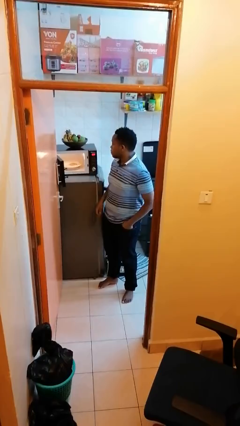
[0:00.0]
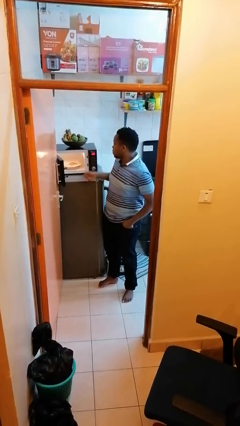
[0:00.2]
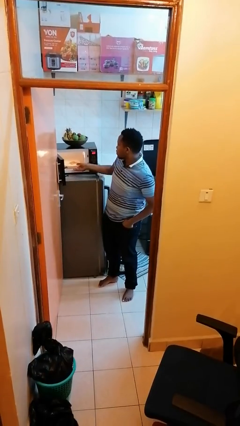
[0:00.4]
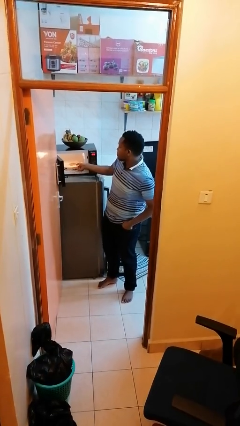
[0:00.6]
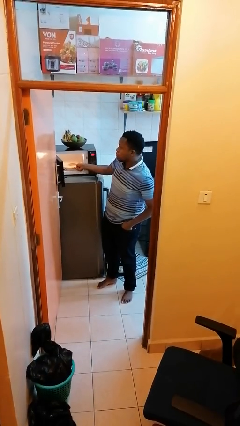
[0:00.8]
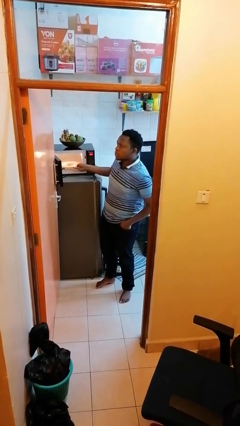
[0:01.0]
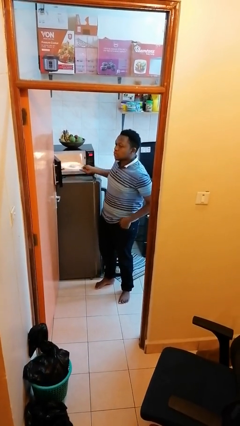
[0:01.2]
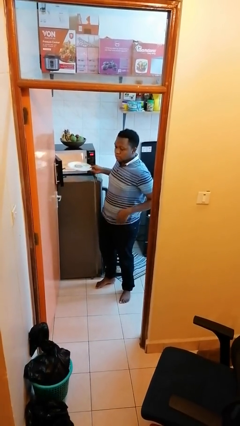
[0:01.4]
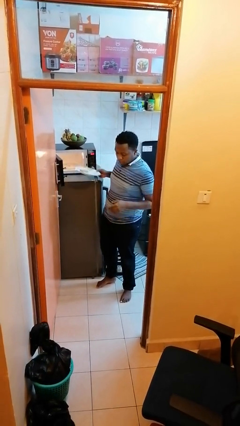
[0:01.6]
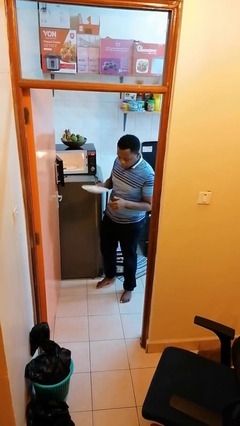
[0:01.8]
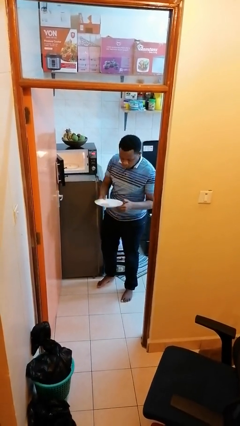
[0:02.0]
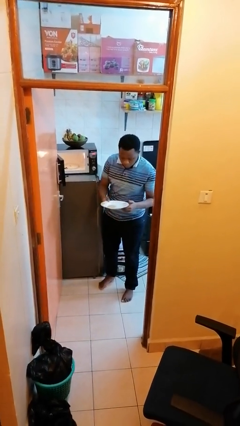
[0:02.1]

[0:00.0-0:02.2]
person takes object from microwave

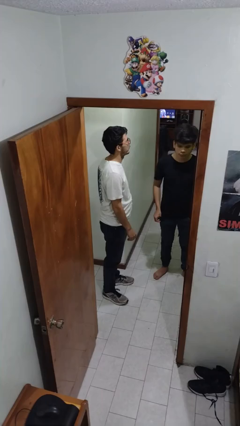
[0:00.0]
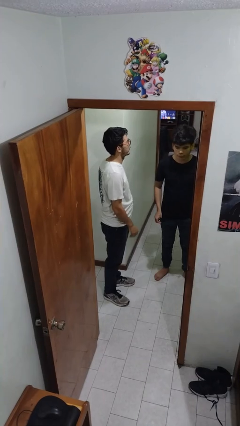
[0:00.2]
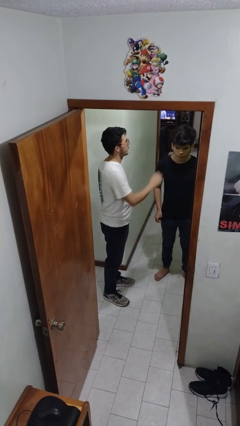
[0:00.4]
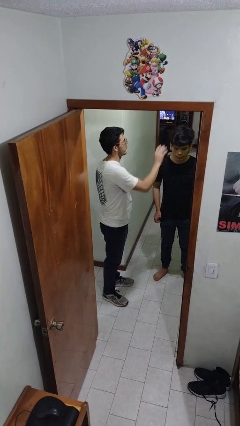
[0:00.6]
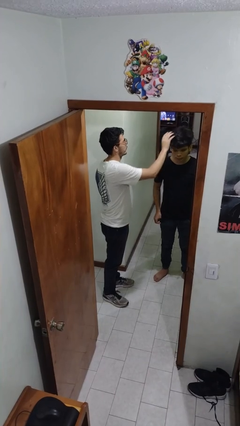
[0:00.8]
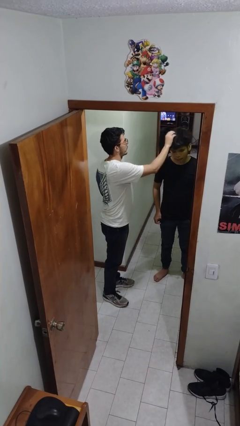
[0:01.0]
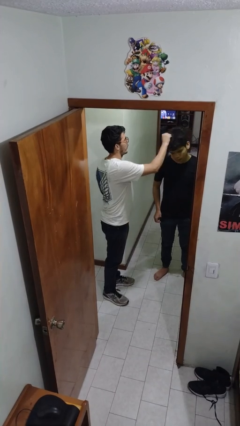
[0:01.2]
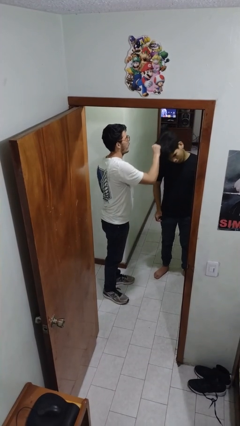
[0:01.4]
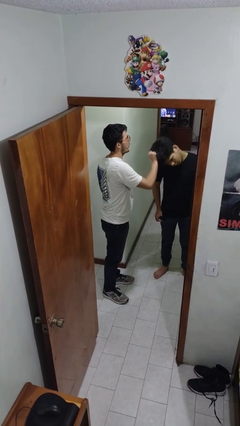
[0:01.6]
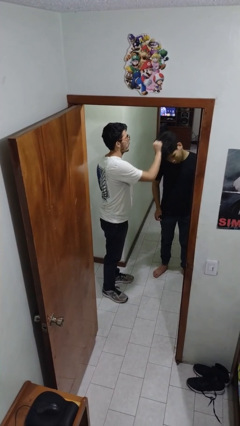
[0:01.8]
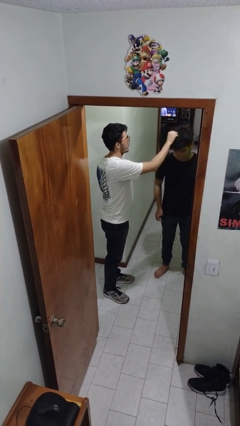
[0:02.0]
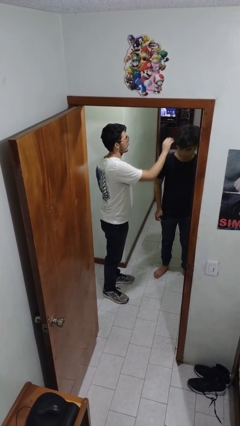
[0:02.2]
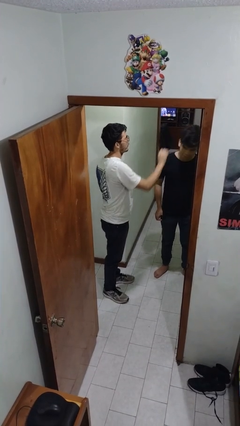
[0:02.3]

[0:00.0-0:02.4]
person grabs person by hair

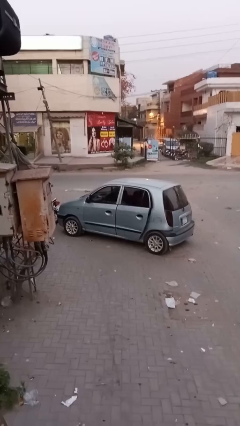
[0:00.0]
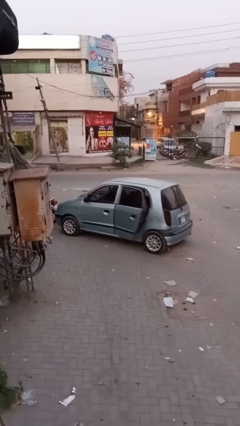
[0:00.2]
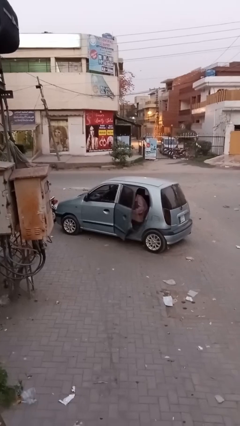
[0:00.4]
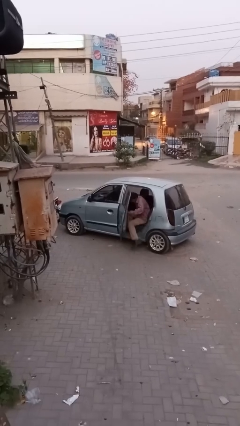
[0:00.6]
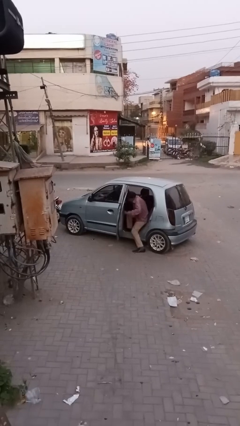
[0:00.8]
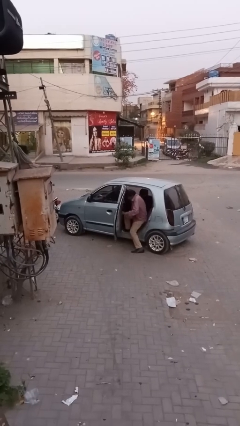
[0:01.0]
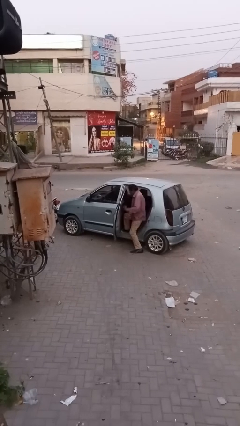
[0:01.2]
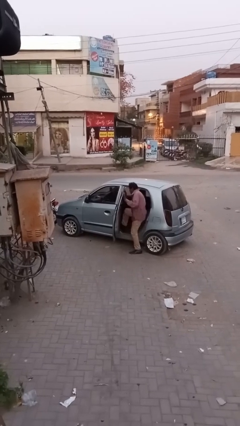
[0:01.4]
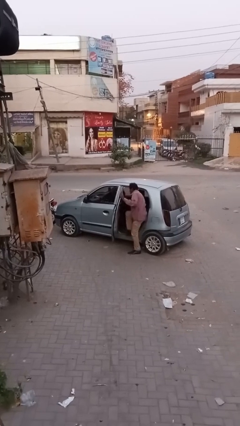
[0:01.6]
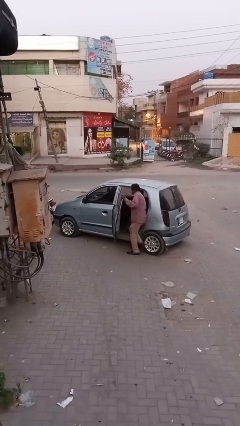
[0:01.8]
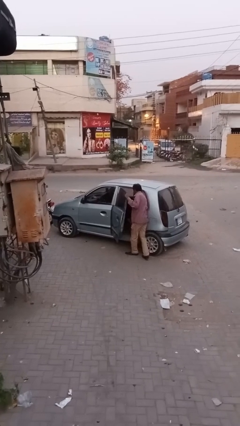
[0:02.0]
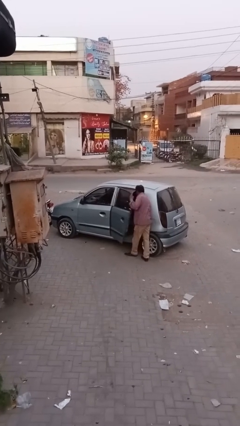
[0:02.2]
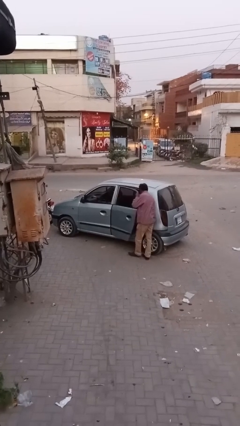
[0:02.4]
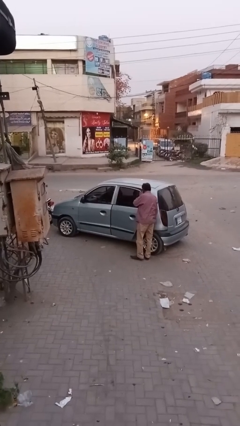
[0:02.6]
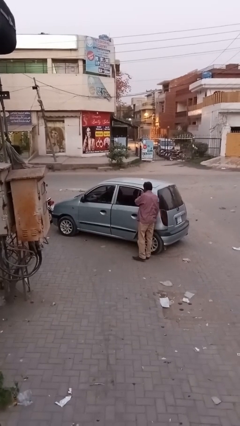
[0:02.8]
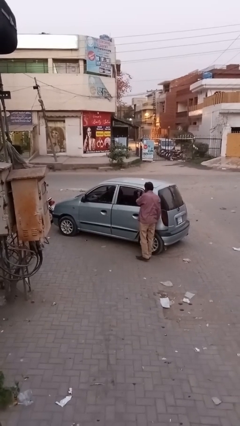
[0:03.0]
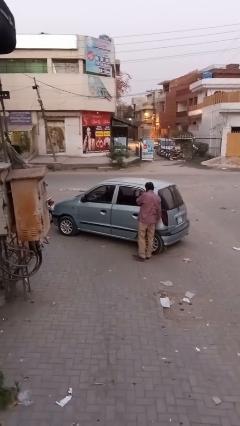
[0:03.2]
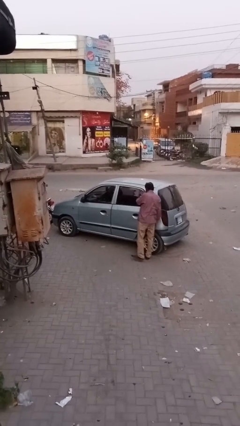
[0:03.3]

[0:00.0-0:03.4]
car drops off person

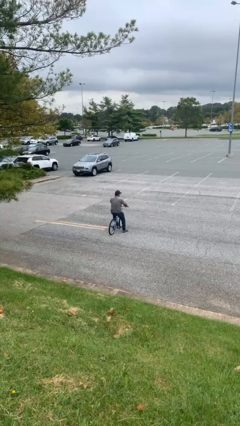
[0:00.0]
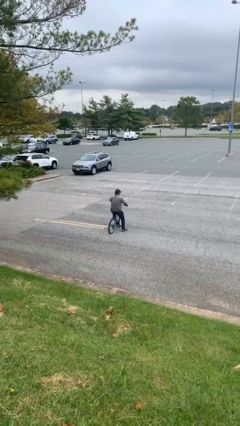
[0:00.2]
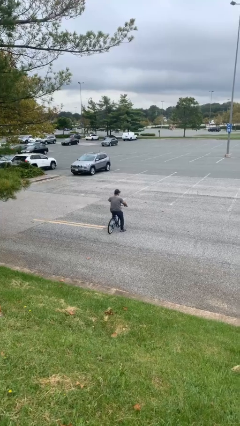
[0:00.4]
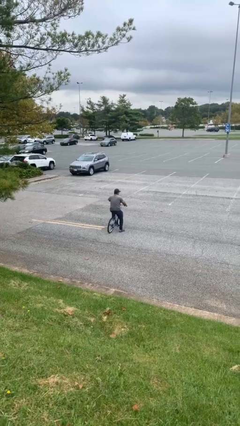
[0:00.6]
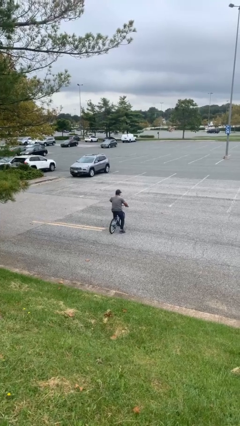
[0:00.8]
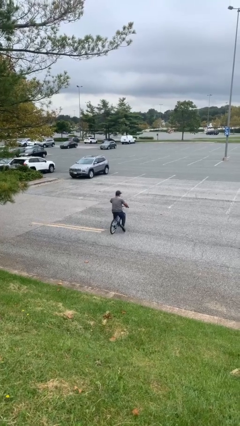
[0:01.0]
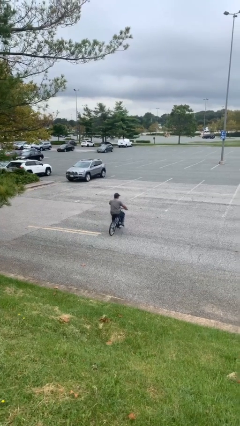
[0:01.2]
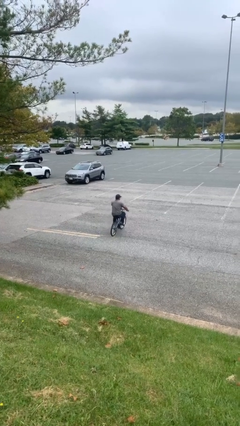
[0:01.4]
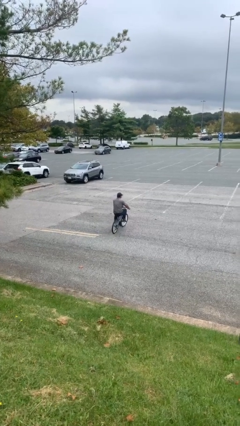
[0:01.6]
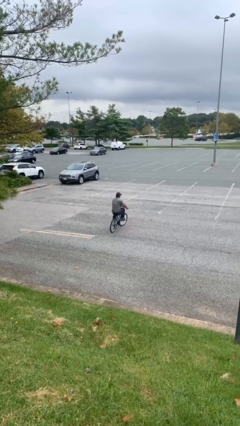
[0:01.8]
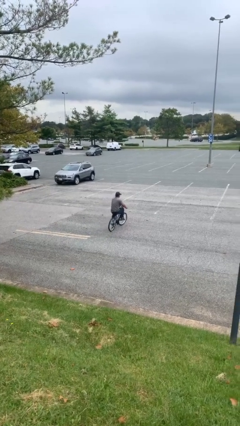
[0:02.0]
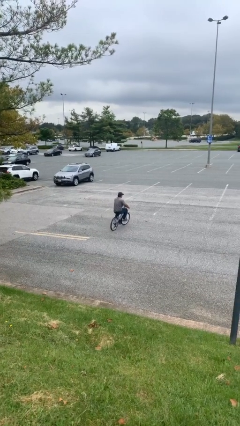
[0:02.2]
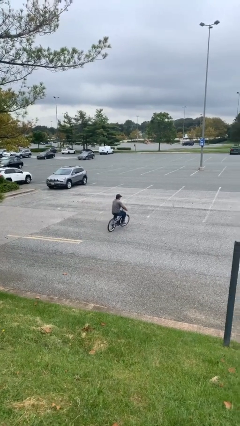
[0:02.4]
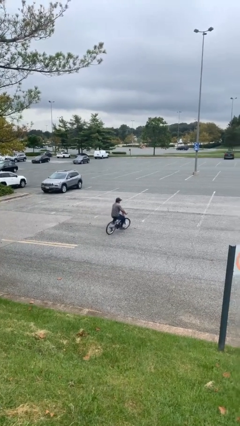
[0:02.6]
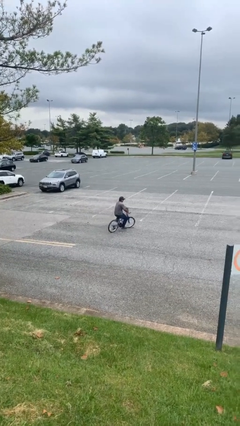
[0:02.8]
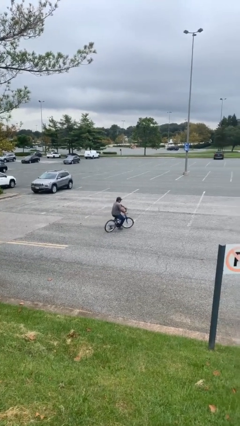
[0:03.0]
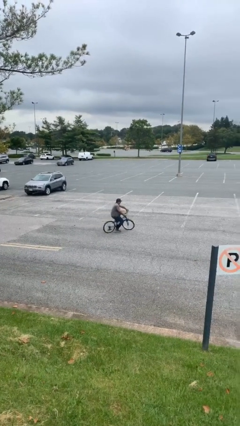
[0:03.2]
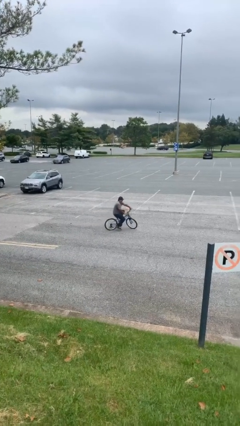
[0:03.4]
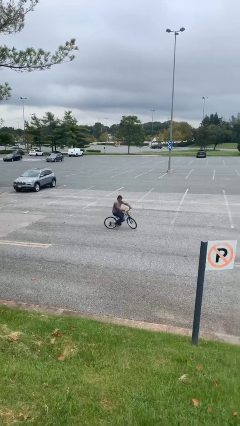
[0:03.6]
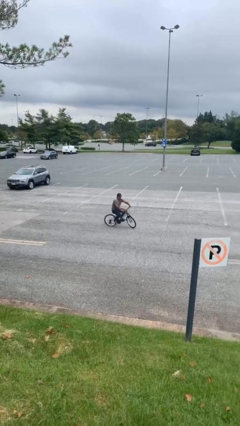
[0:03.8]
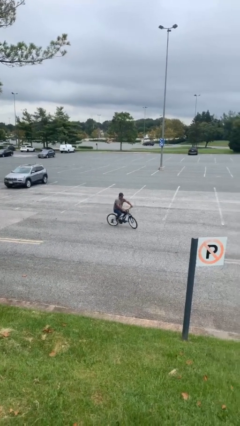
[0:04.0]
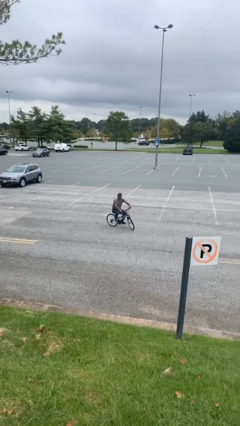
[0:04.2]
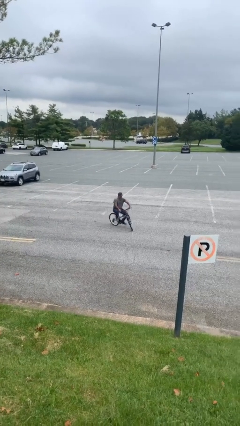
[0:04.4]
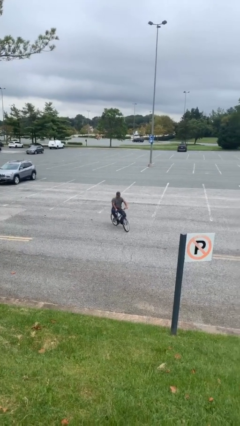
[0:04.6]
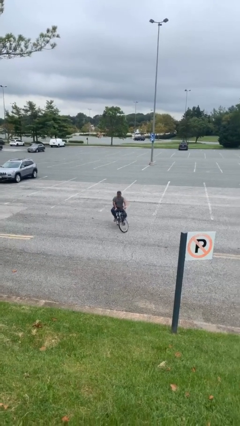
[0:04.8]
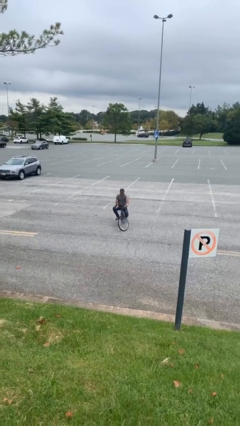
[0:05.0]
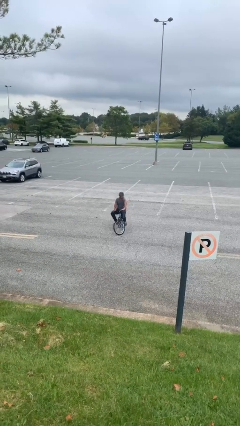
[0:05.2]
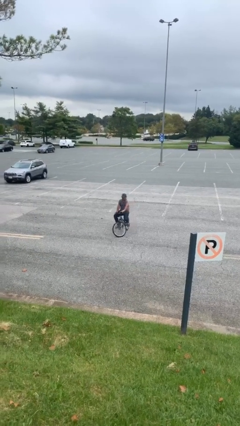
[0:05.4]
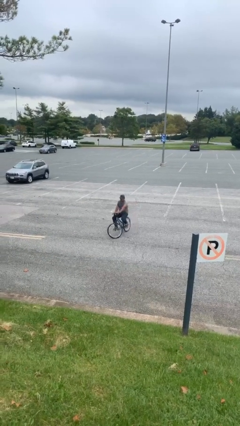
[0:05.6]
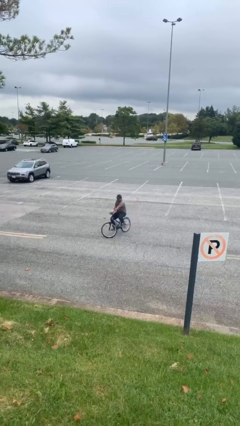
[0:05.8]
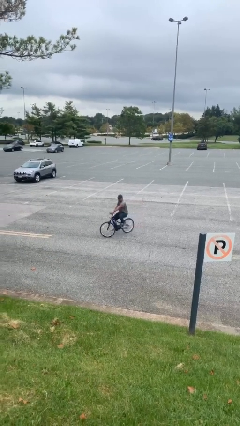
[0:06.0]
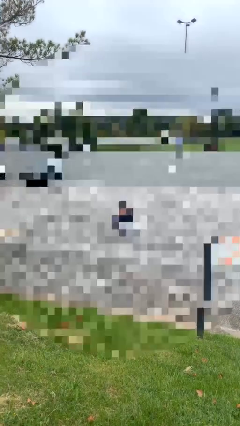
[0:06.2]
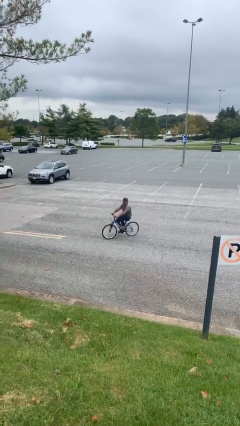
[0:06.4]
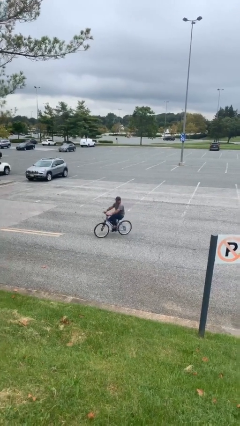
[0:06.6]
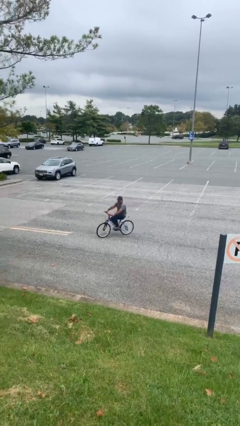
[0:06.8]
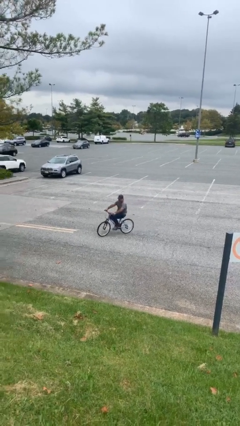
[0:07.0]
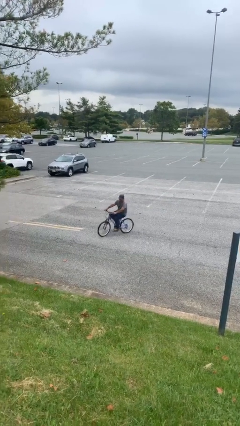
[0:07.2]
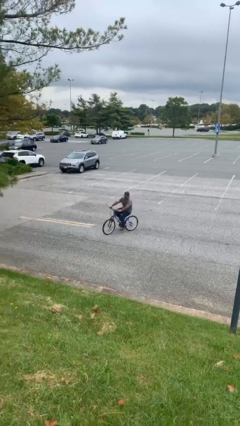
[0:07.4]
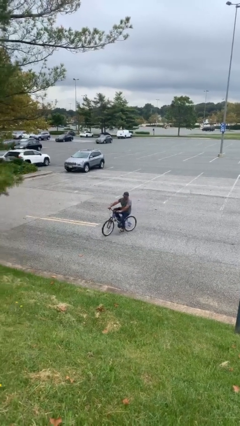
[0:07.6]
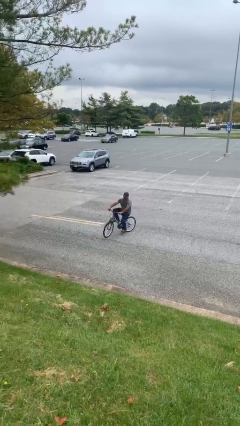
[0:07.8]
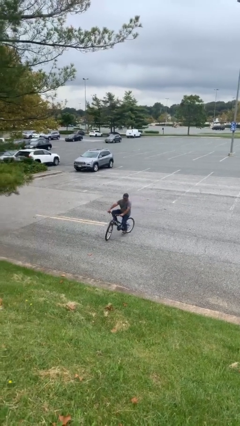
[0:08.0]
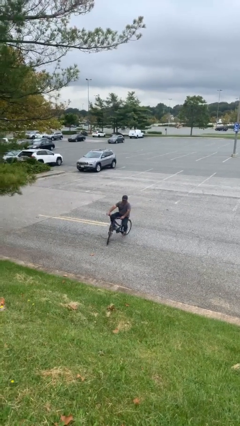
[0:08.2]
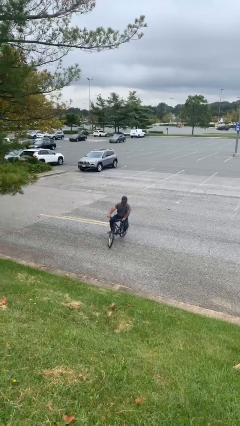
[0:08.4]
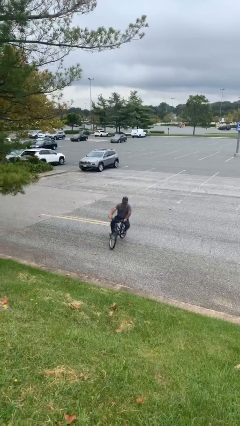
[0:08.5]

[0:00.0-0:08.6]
person rides bicycle

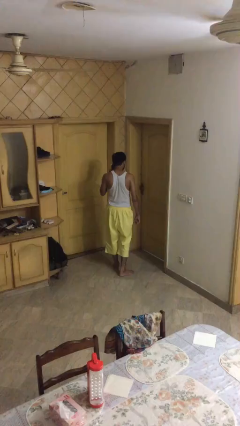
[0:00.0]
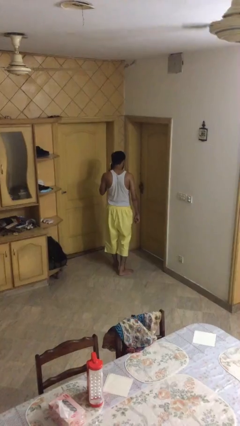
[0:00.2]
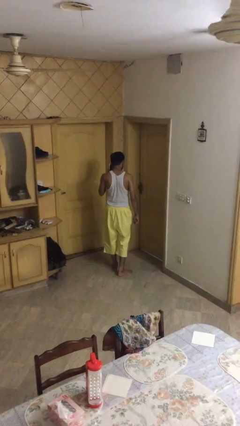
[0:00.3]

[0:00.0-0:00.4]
person opens facility door

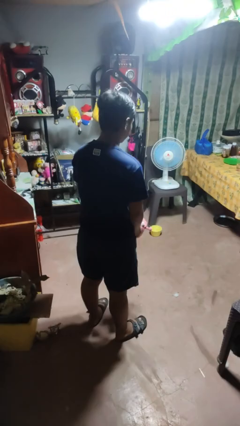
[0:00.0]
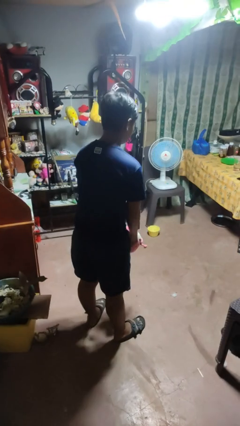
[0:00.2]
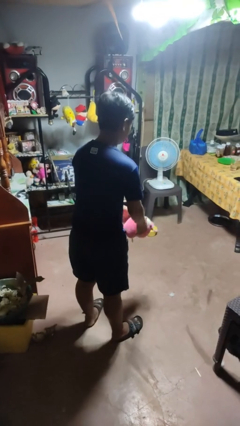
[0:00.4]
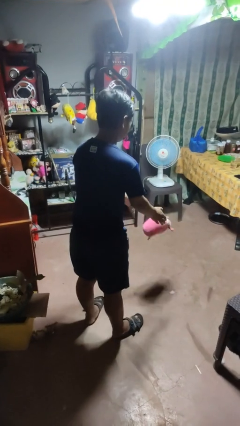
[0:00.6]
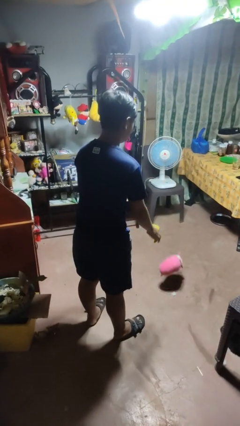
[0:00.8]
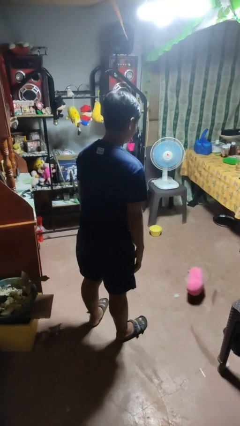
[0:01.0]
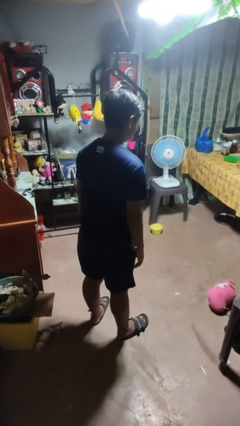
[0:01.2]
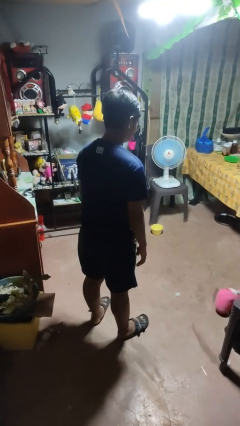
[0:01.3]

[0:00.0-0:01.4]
person throws object into air
